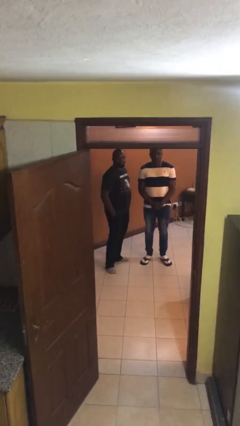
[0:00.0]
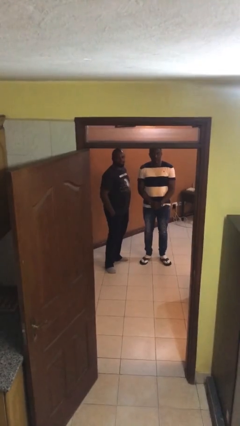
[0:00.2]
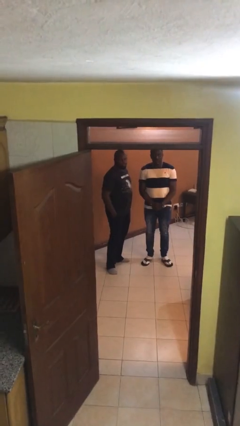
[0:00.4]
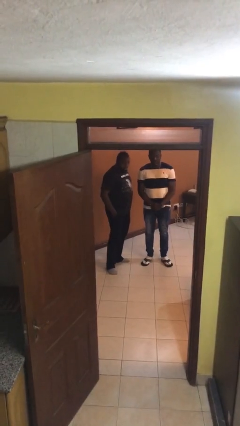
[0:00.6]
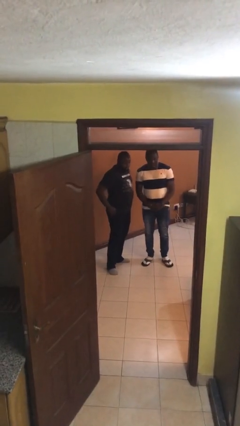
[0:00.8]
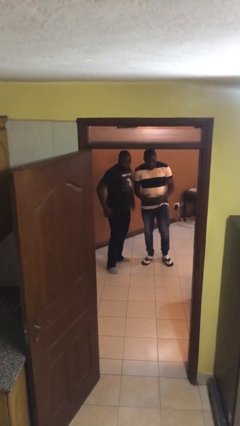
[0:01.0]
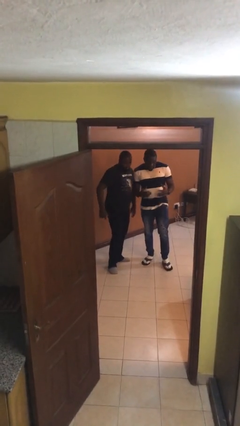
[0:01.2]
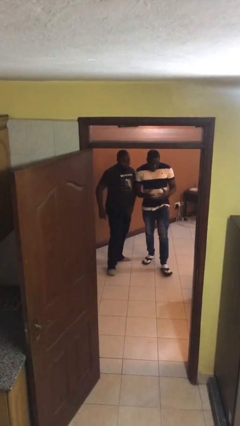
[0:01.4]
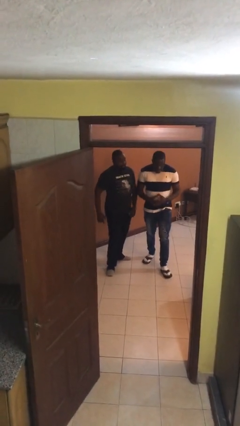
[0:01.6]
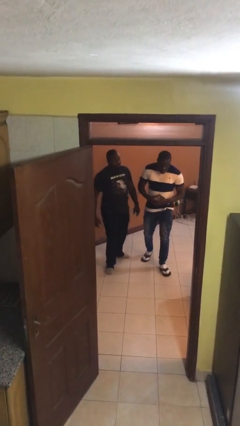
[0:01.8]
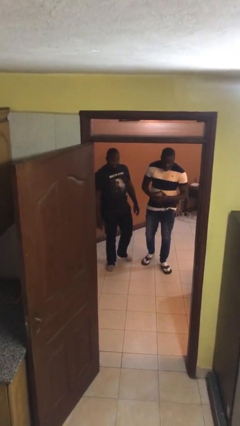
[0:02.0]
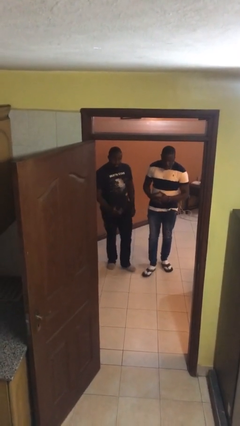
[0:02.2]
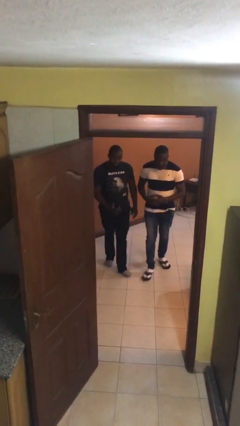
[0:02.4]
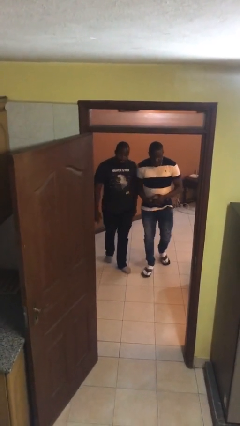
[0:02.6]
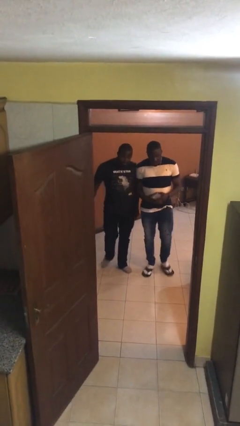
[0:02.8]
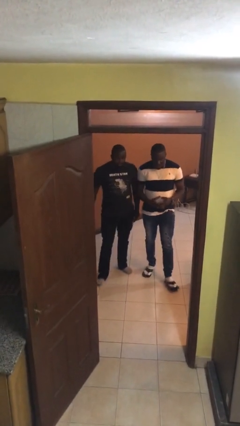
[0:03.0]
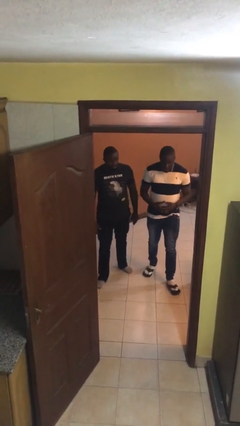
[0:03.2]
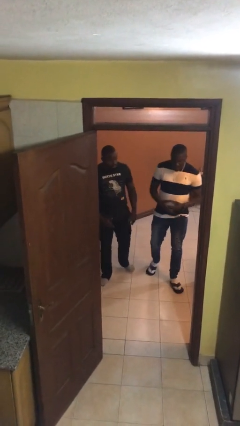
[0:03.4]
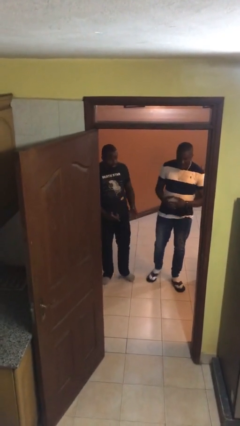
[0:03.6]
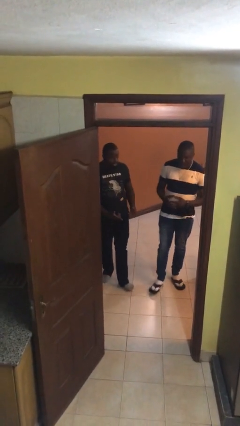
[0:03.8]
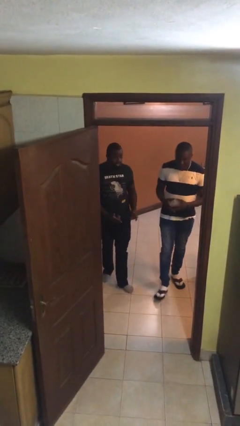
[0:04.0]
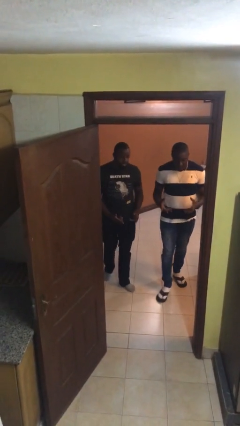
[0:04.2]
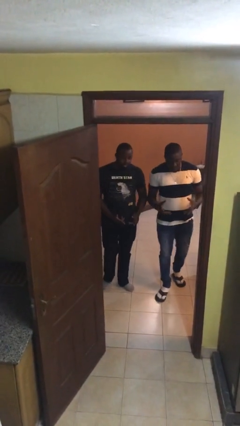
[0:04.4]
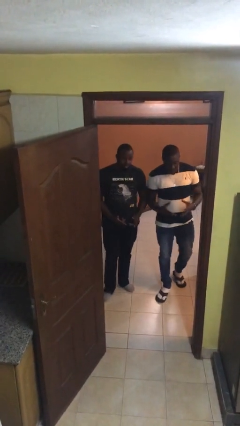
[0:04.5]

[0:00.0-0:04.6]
person talks to person

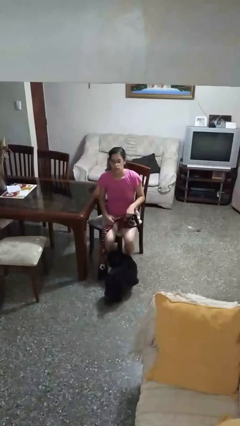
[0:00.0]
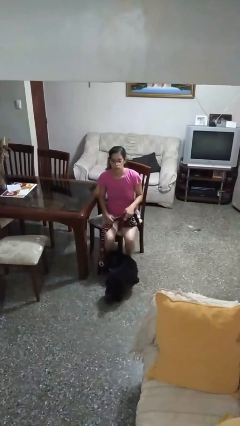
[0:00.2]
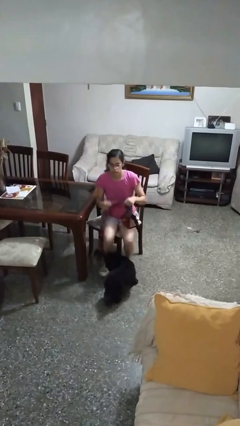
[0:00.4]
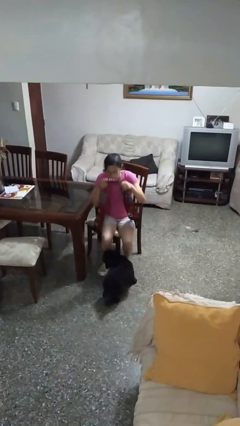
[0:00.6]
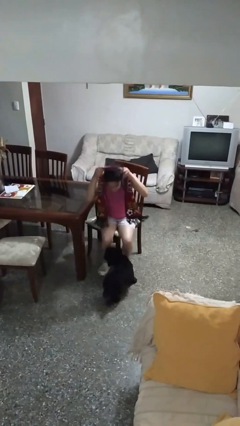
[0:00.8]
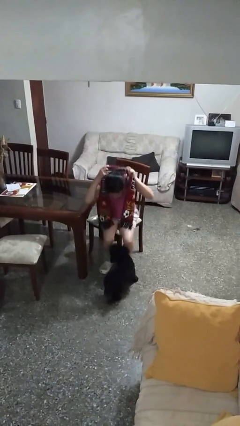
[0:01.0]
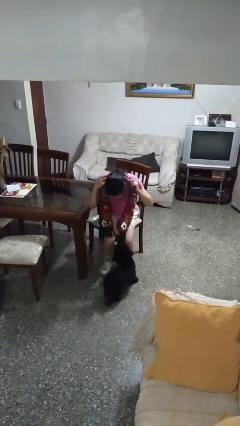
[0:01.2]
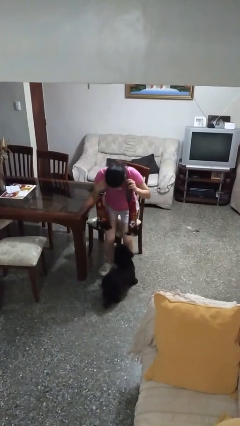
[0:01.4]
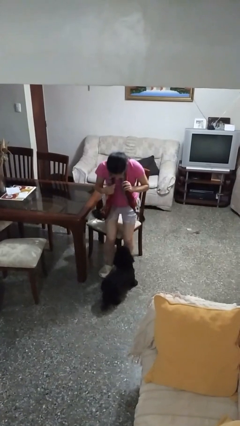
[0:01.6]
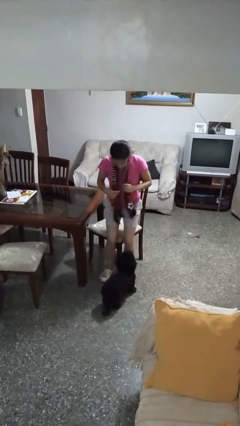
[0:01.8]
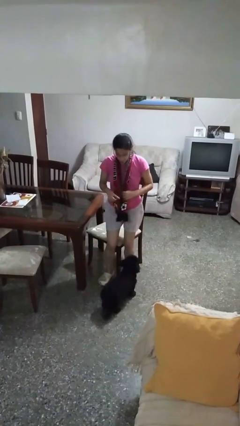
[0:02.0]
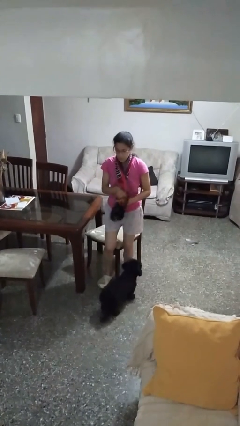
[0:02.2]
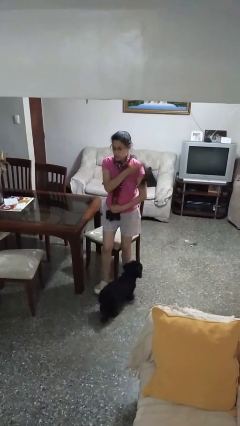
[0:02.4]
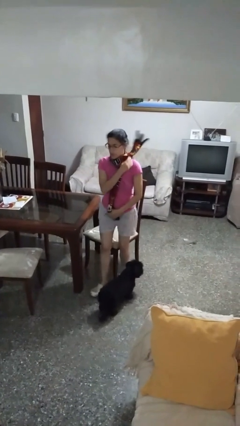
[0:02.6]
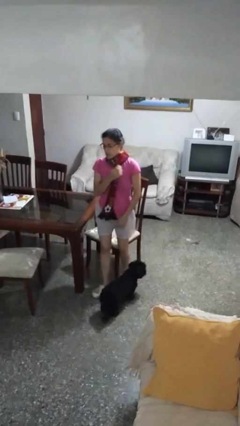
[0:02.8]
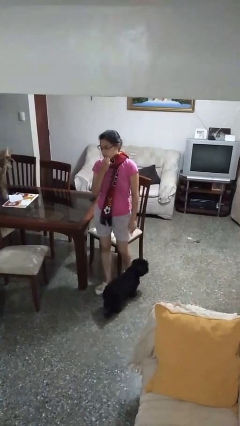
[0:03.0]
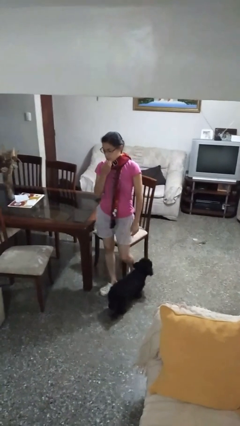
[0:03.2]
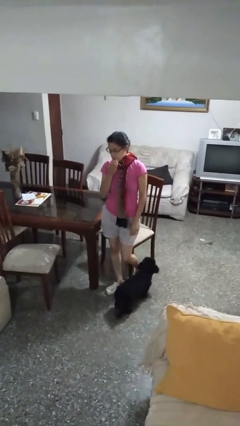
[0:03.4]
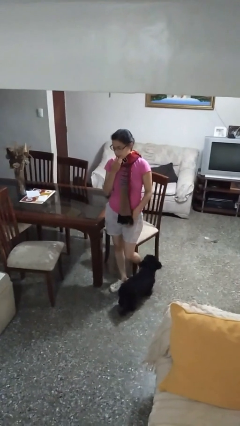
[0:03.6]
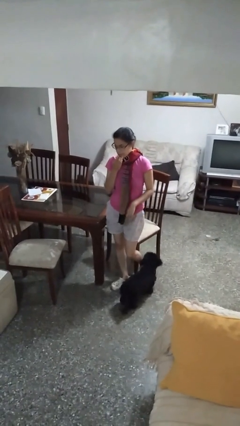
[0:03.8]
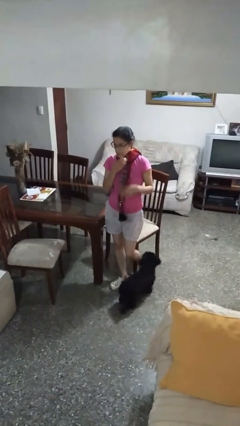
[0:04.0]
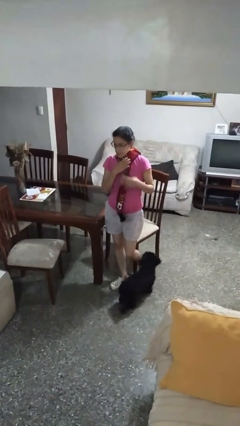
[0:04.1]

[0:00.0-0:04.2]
person puts on scarf

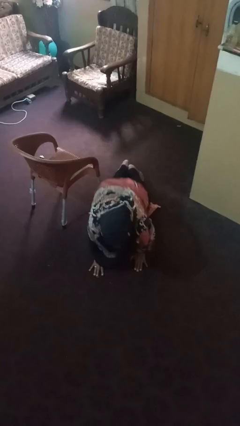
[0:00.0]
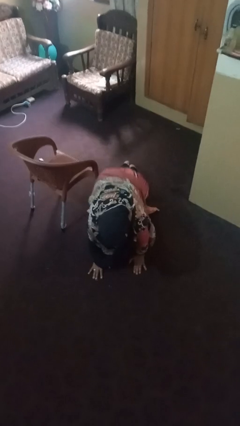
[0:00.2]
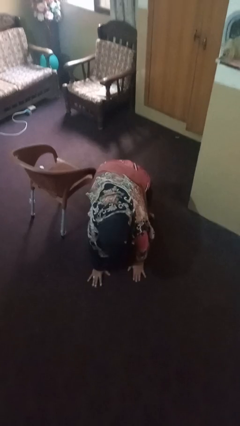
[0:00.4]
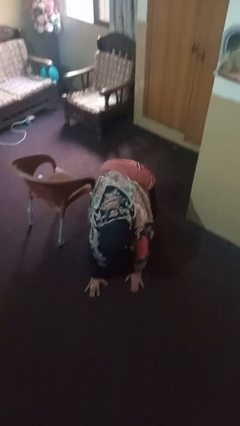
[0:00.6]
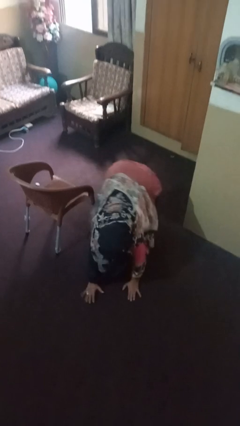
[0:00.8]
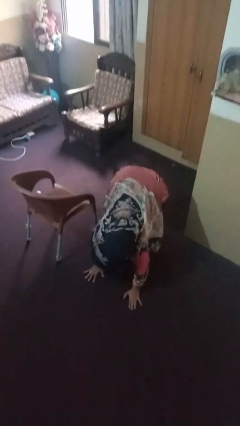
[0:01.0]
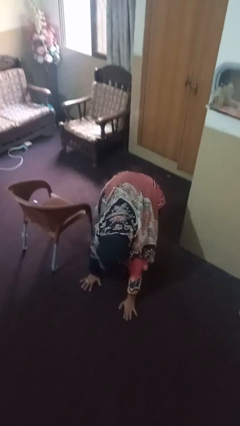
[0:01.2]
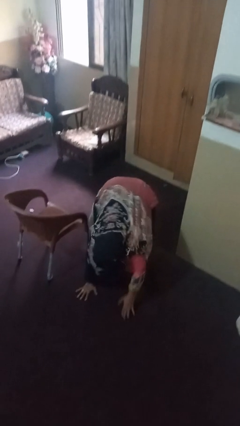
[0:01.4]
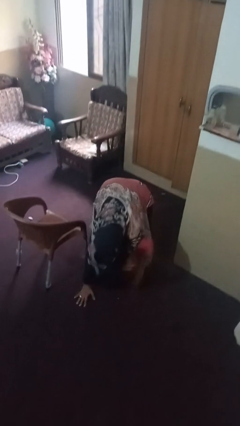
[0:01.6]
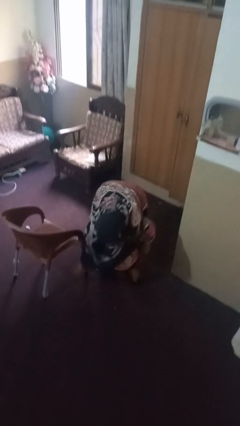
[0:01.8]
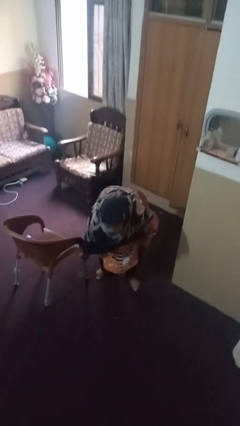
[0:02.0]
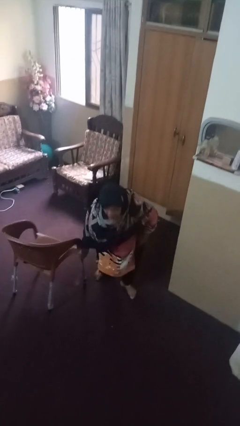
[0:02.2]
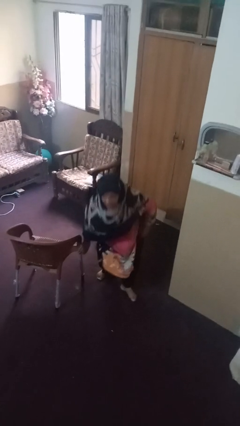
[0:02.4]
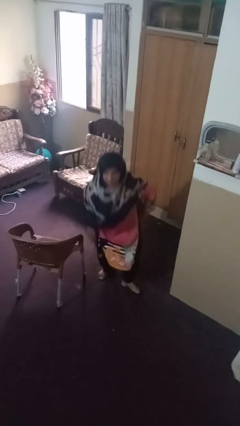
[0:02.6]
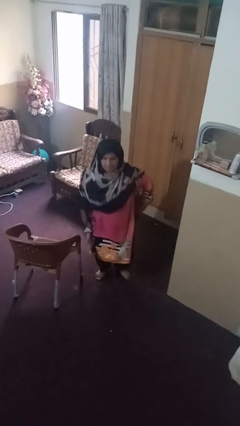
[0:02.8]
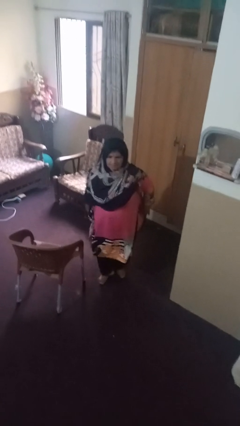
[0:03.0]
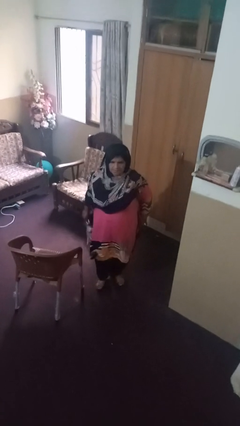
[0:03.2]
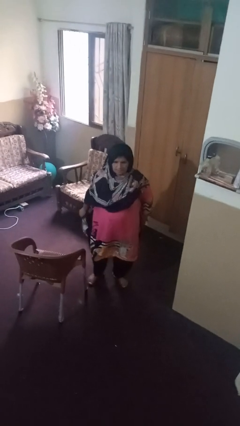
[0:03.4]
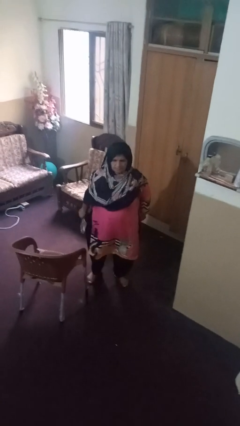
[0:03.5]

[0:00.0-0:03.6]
person stands up from floor

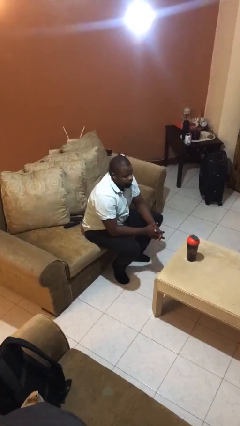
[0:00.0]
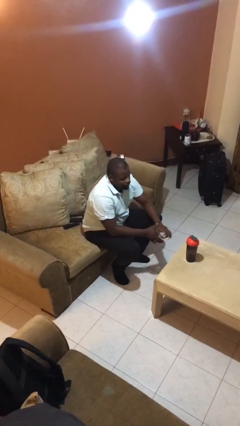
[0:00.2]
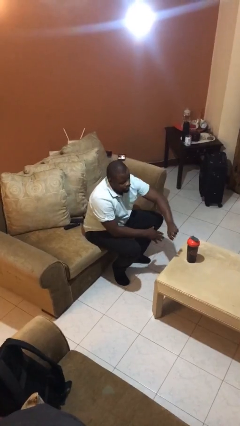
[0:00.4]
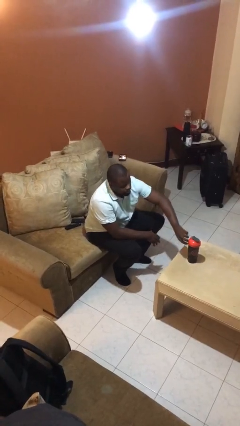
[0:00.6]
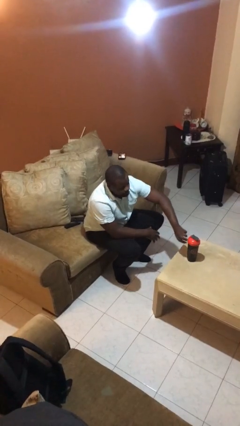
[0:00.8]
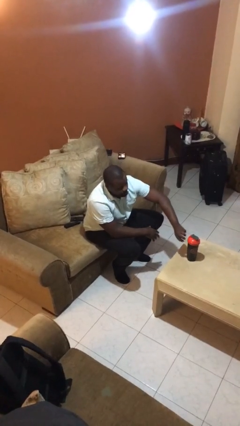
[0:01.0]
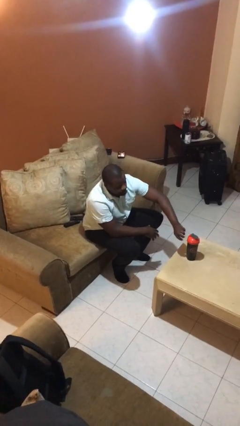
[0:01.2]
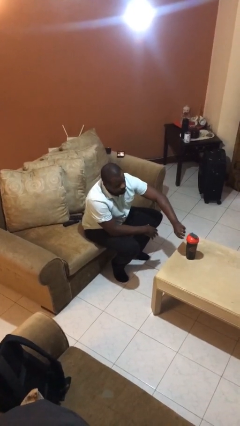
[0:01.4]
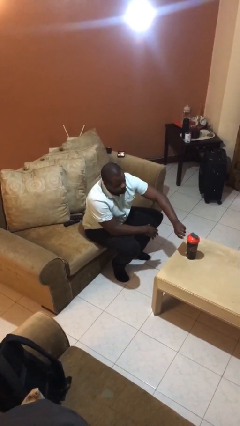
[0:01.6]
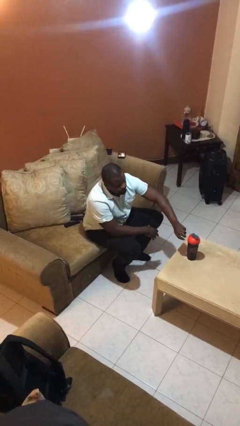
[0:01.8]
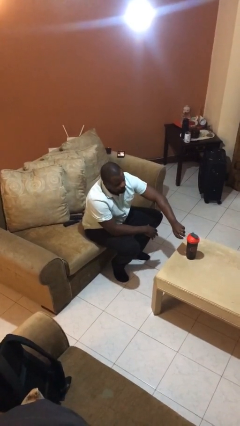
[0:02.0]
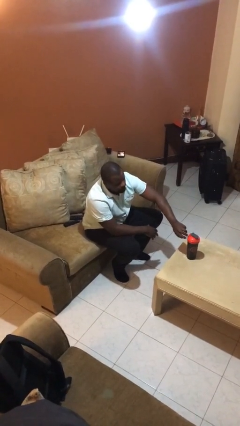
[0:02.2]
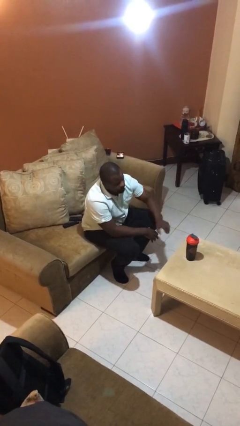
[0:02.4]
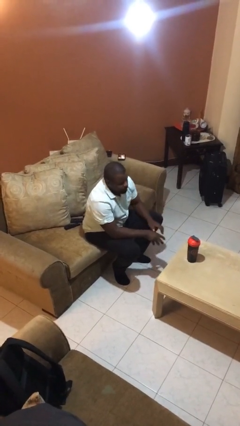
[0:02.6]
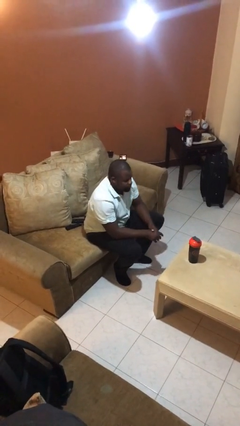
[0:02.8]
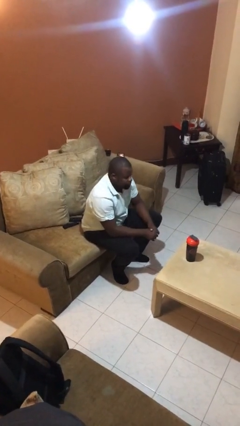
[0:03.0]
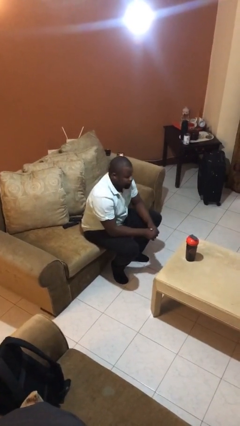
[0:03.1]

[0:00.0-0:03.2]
person taps object with finger

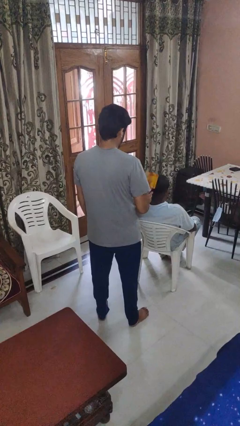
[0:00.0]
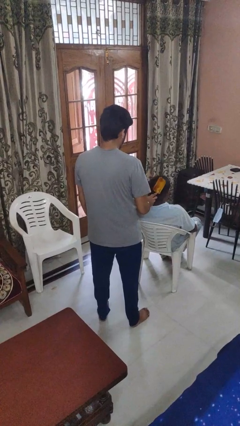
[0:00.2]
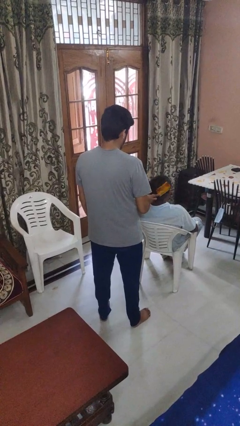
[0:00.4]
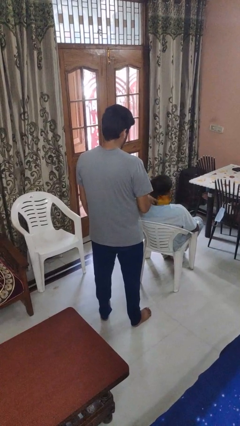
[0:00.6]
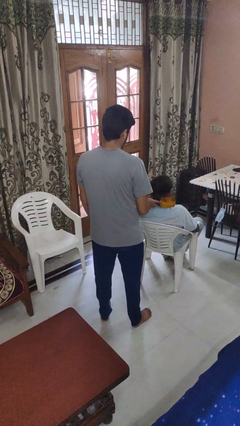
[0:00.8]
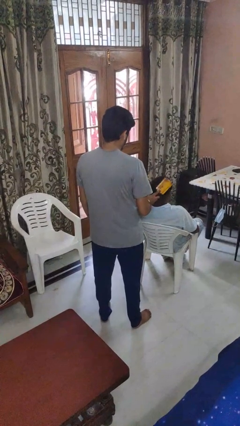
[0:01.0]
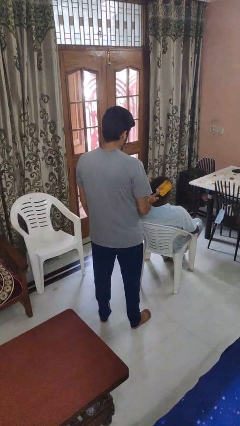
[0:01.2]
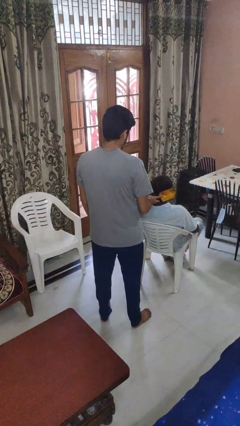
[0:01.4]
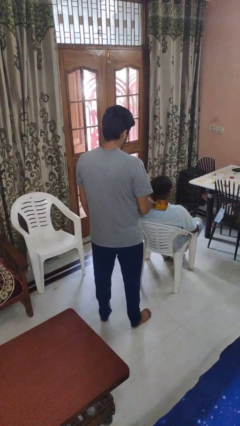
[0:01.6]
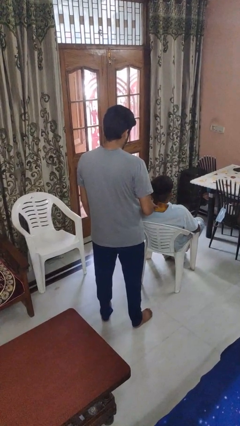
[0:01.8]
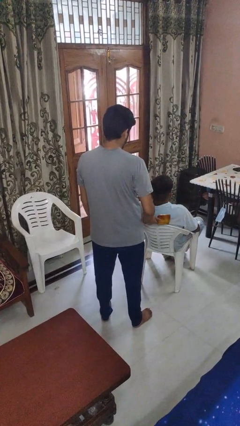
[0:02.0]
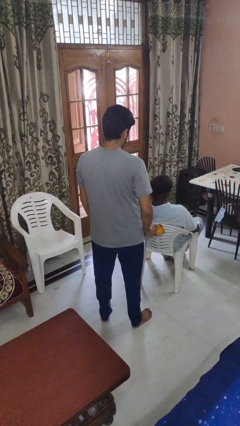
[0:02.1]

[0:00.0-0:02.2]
person brushes hair of person
